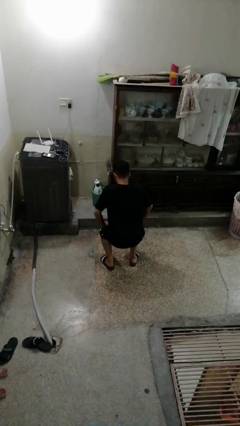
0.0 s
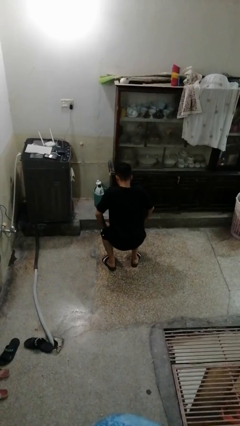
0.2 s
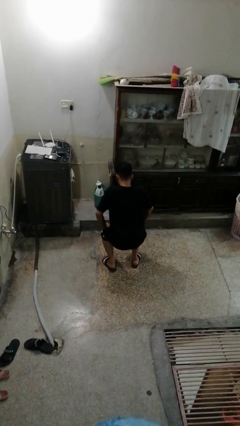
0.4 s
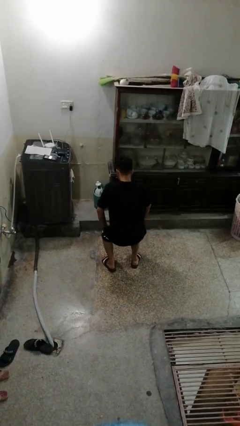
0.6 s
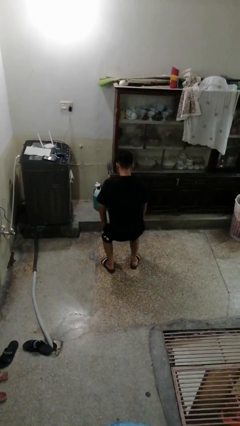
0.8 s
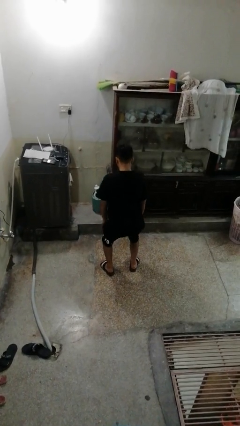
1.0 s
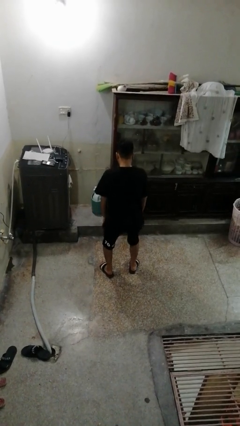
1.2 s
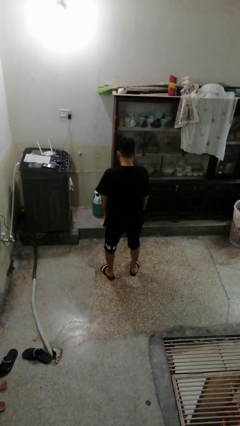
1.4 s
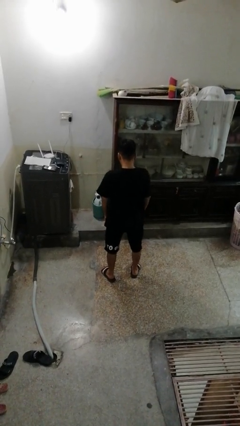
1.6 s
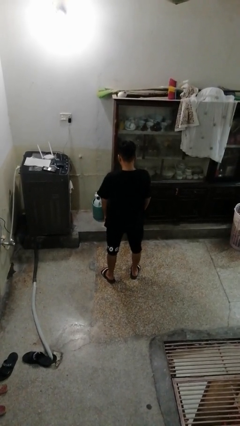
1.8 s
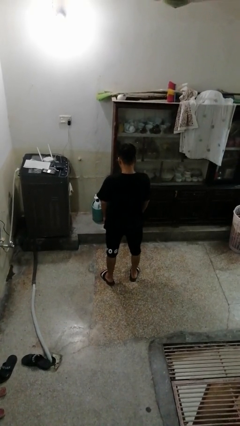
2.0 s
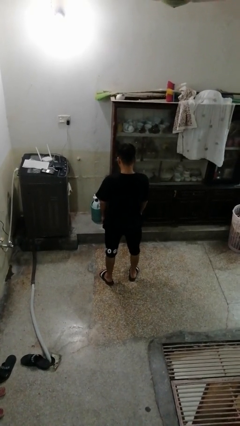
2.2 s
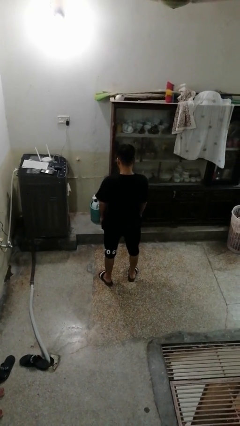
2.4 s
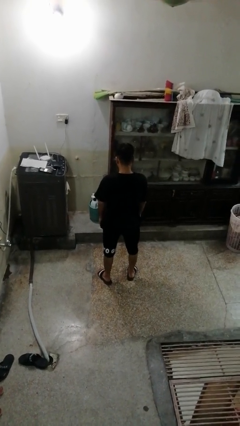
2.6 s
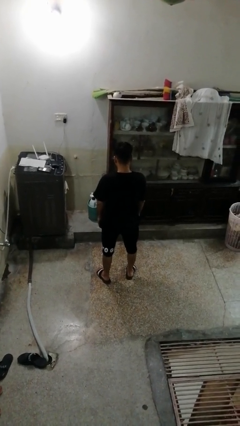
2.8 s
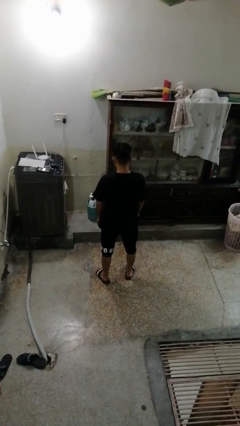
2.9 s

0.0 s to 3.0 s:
person stands up

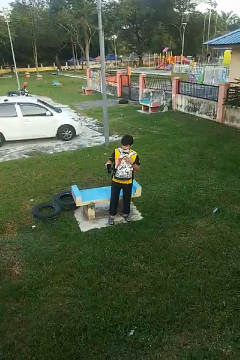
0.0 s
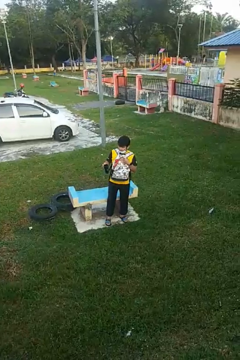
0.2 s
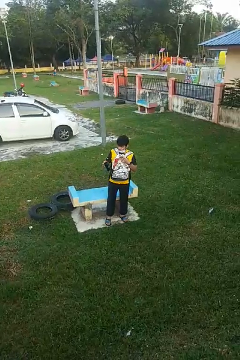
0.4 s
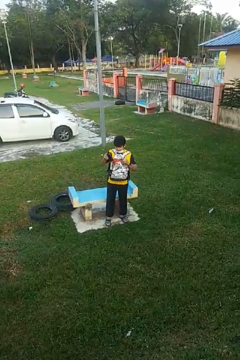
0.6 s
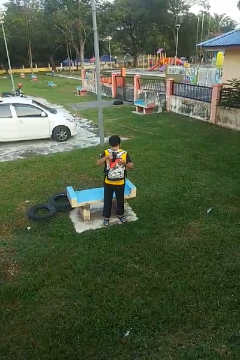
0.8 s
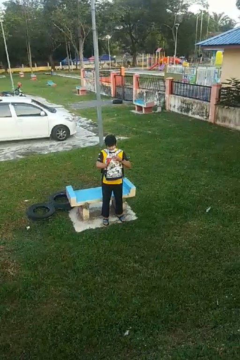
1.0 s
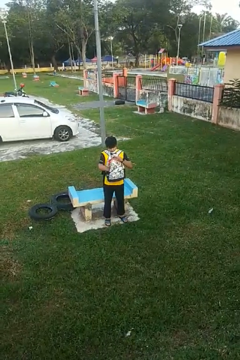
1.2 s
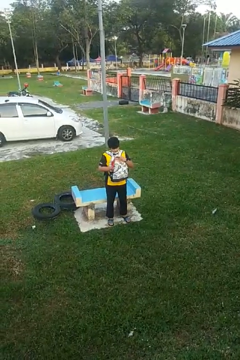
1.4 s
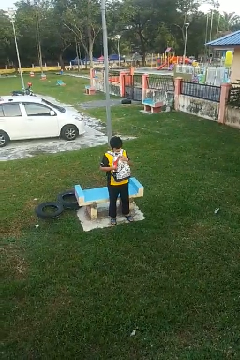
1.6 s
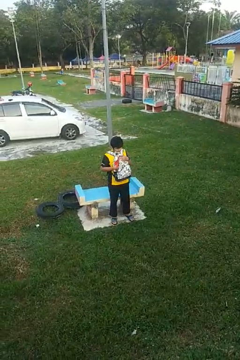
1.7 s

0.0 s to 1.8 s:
person puts on facemask

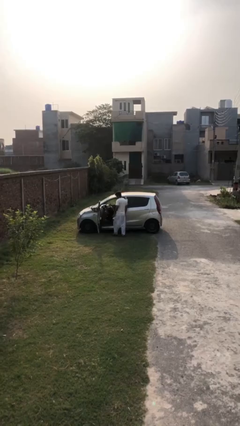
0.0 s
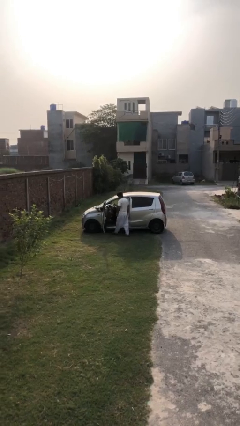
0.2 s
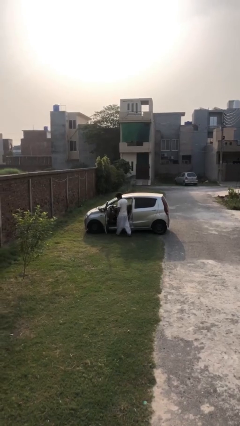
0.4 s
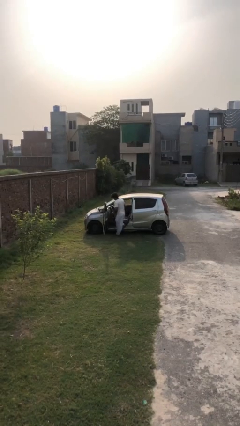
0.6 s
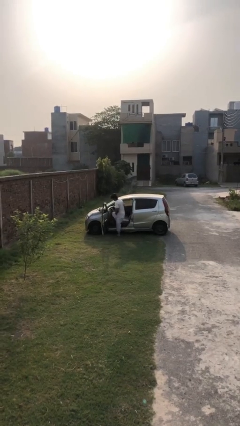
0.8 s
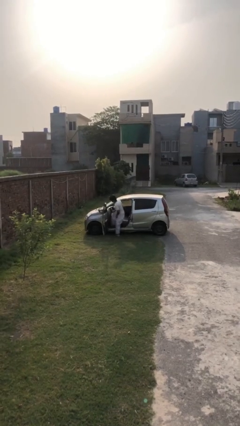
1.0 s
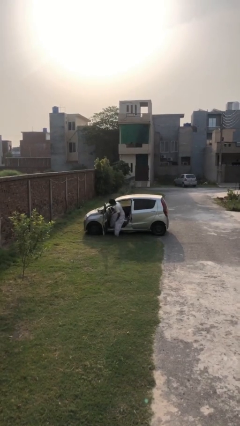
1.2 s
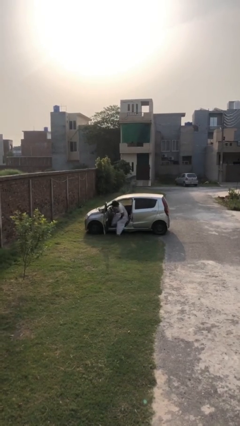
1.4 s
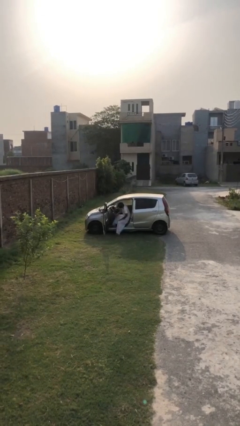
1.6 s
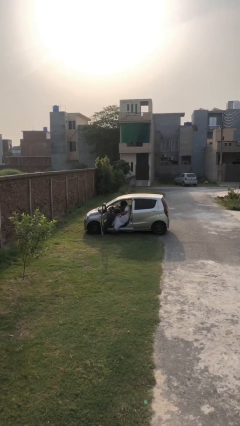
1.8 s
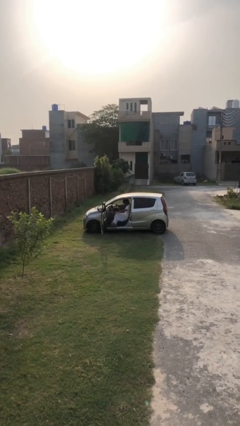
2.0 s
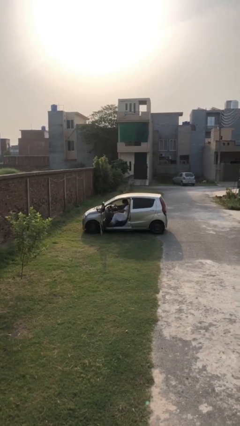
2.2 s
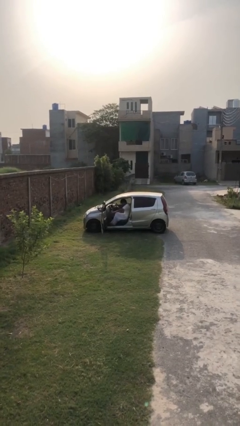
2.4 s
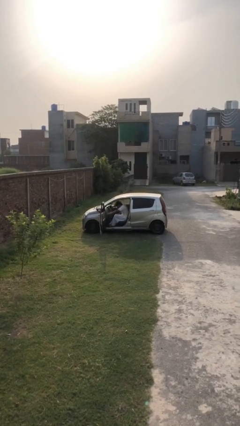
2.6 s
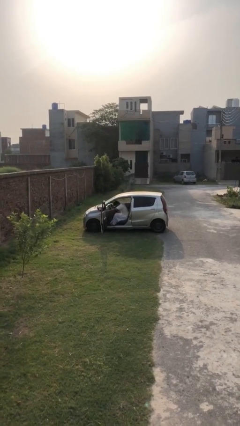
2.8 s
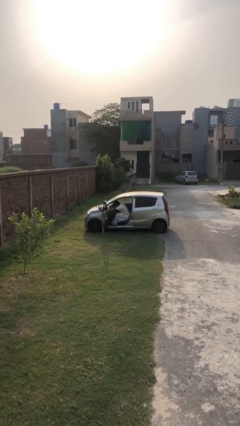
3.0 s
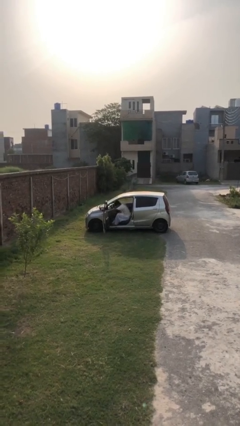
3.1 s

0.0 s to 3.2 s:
person enters car

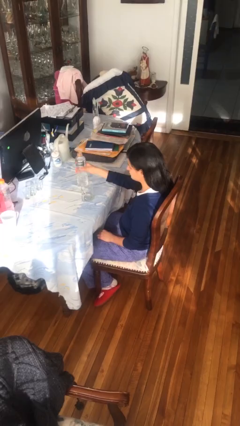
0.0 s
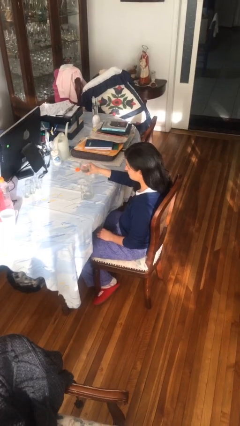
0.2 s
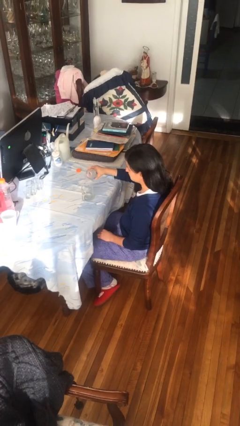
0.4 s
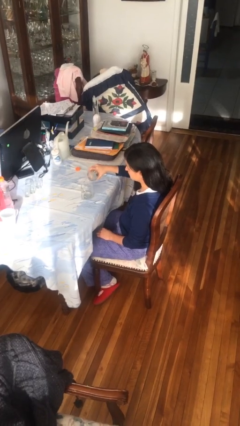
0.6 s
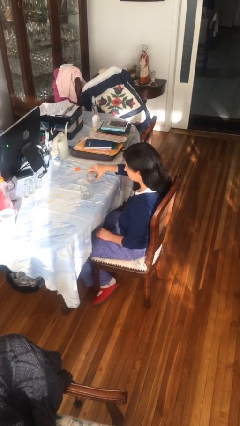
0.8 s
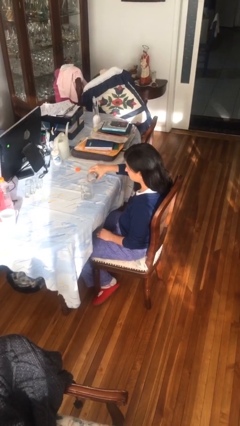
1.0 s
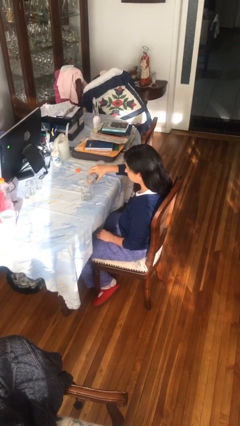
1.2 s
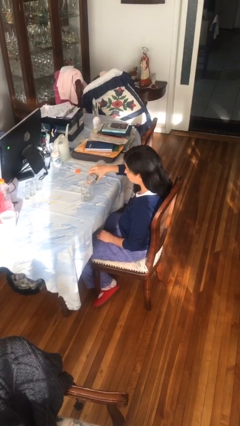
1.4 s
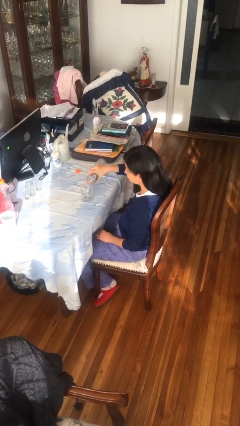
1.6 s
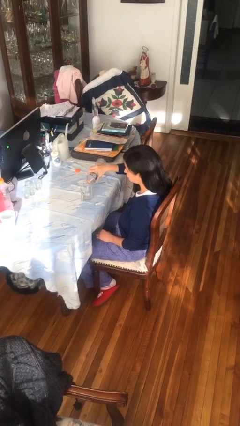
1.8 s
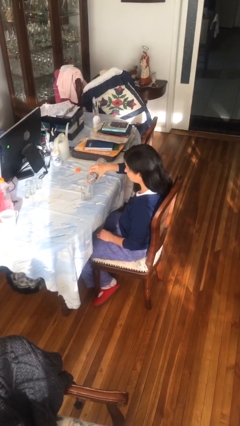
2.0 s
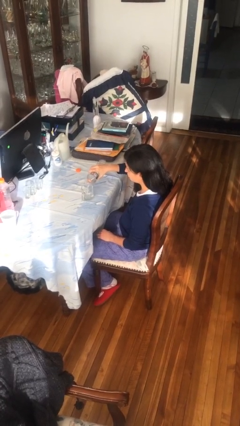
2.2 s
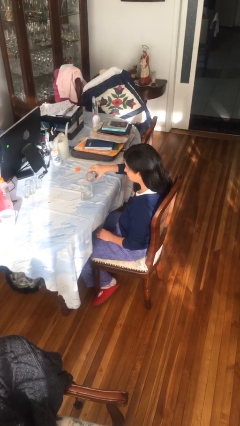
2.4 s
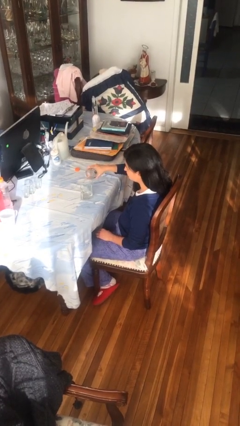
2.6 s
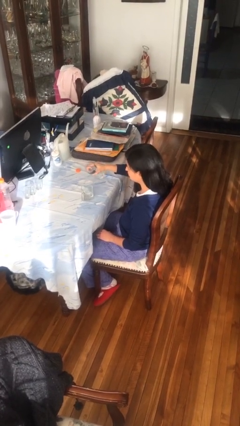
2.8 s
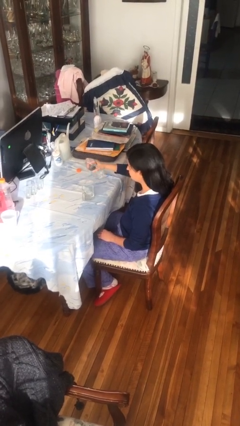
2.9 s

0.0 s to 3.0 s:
person pours liquid into cup

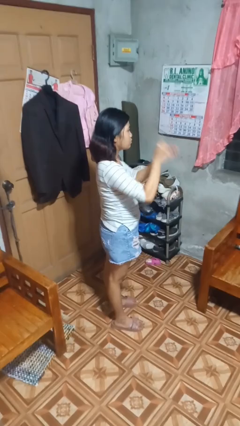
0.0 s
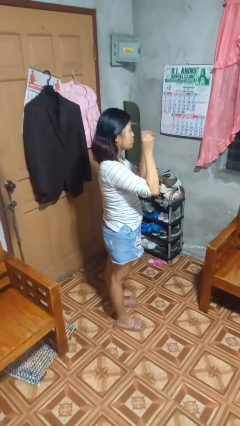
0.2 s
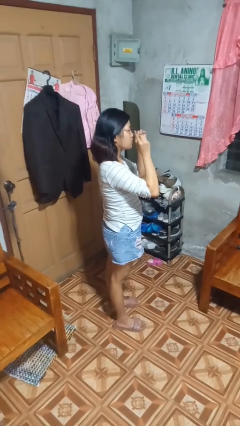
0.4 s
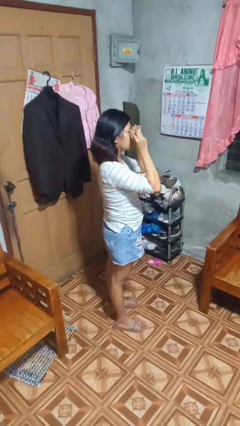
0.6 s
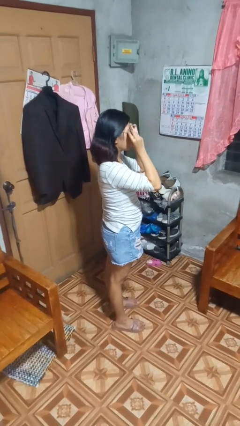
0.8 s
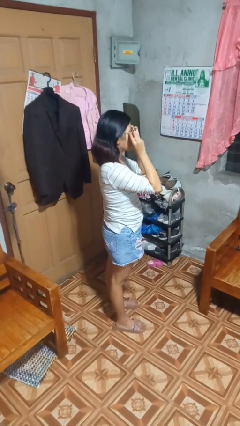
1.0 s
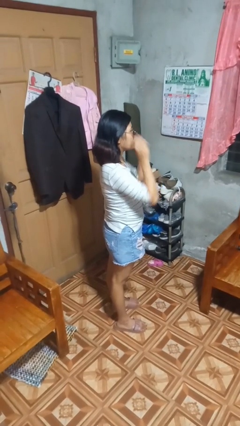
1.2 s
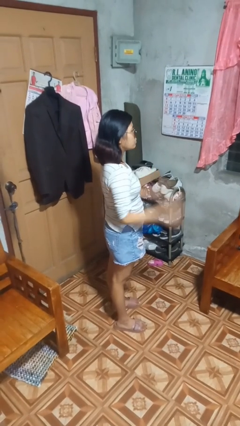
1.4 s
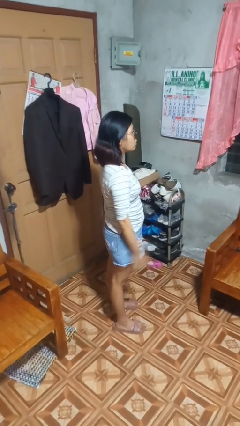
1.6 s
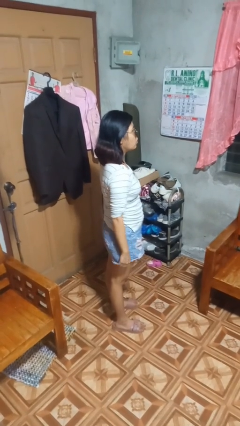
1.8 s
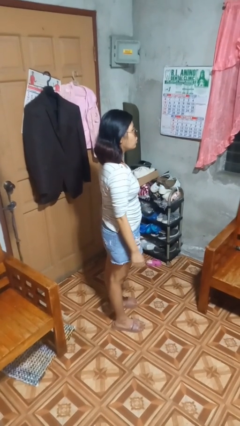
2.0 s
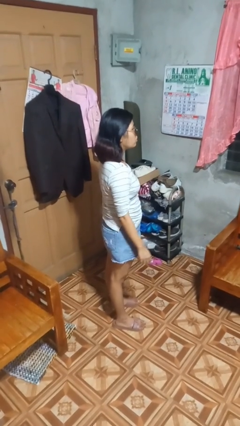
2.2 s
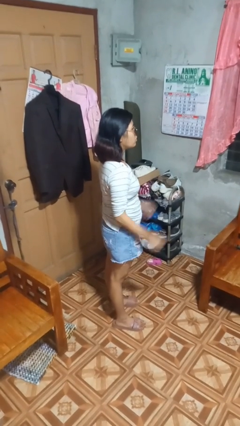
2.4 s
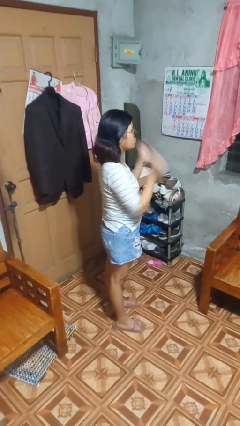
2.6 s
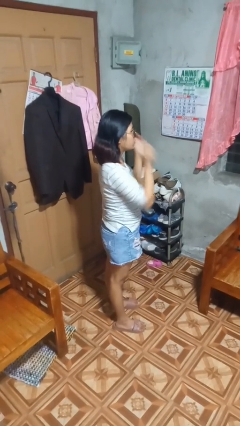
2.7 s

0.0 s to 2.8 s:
person puts on sunglasses

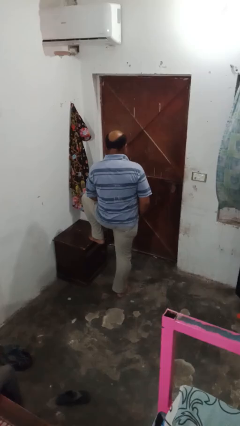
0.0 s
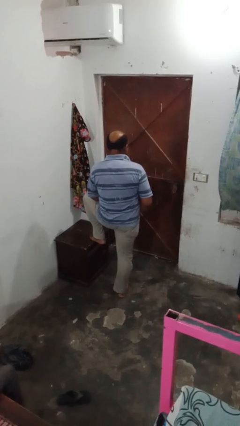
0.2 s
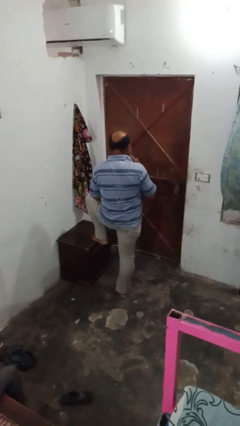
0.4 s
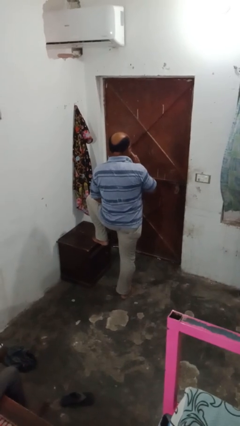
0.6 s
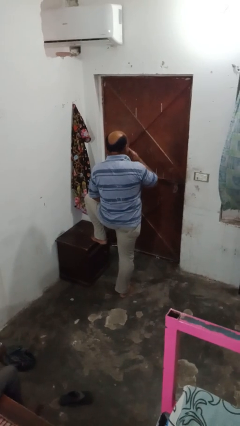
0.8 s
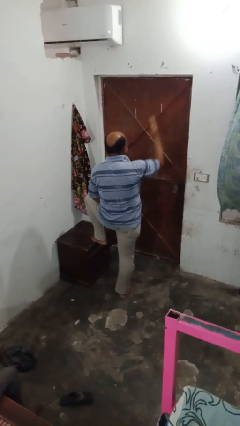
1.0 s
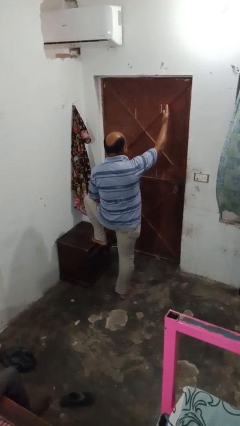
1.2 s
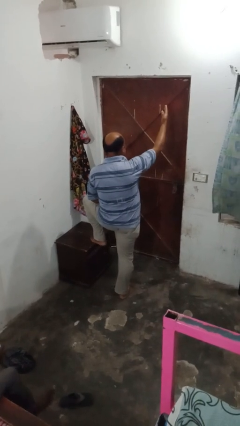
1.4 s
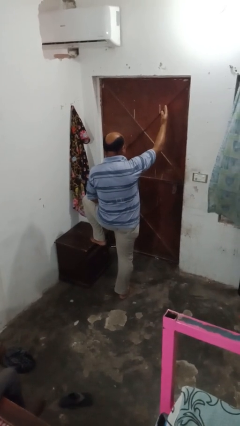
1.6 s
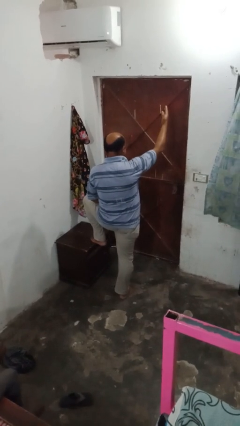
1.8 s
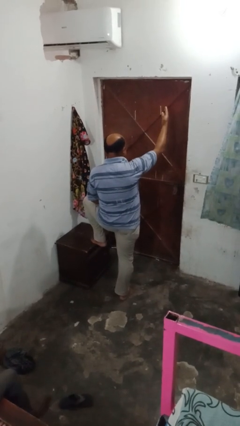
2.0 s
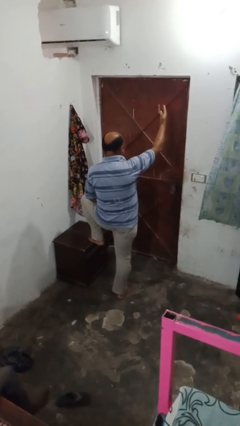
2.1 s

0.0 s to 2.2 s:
person gestures blow kiss

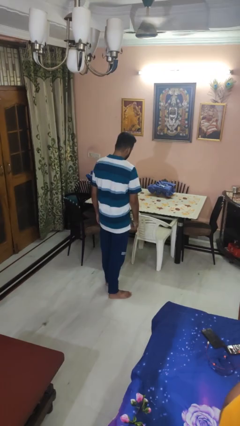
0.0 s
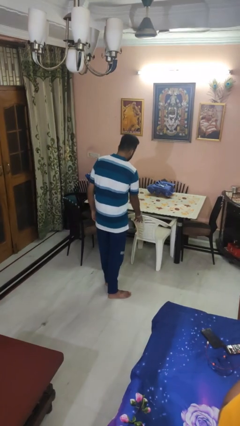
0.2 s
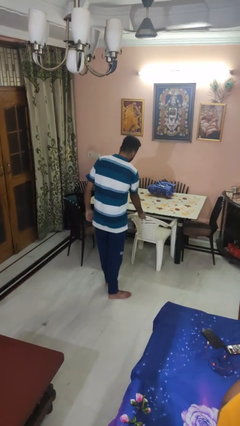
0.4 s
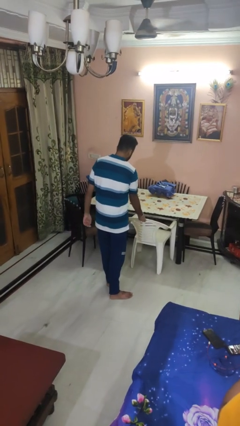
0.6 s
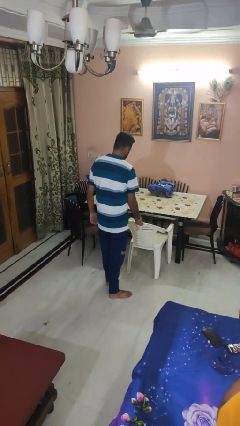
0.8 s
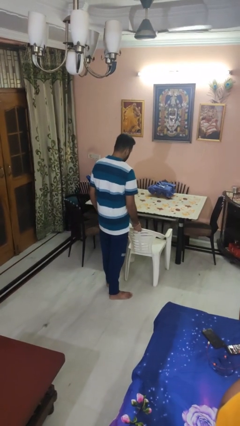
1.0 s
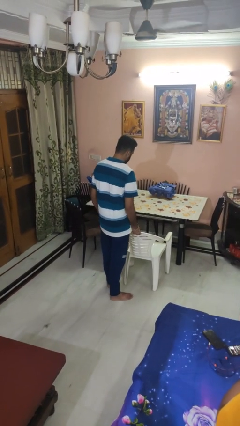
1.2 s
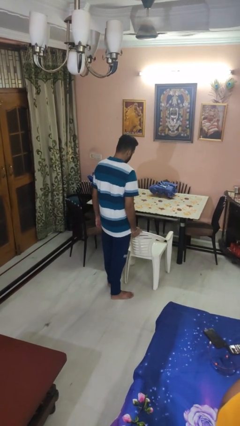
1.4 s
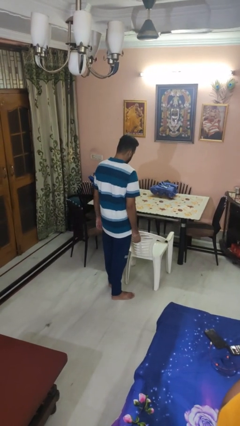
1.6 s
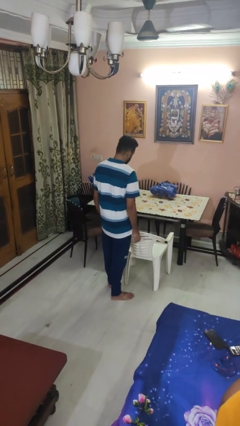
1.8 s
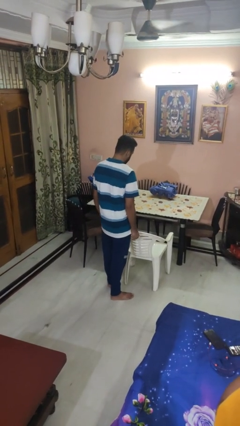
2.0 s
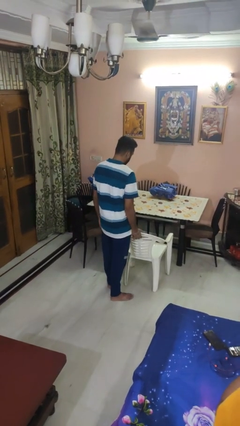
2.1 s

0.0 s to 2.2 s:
person pulls out chair
